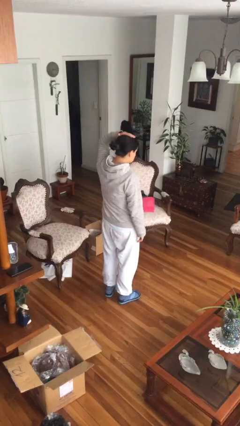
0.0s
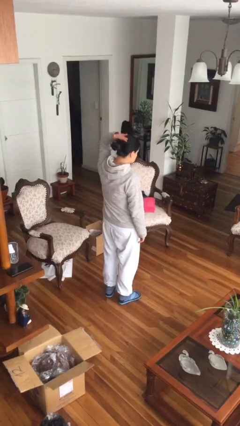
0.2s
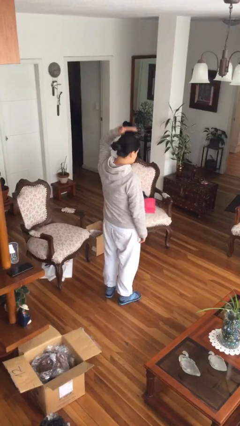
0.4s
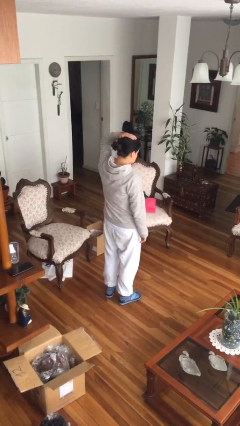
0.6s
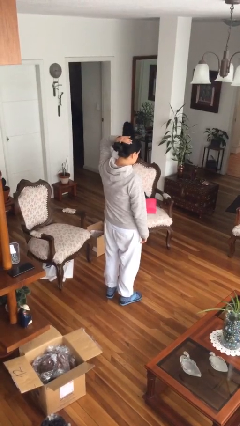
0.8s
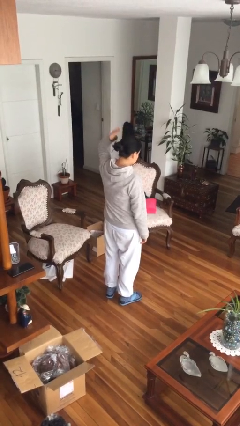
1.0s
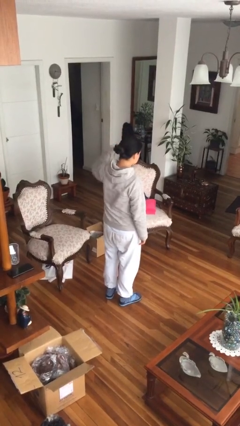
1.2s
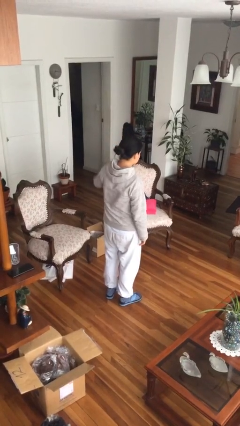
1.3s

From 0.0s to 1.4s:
person pats head

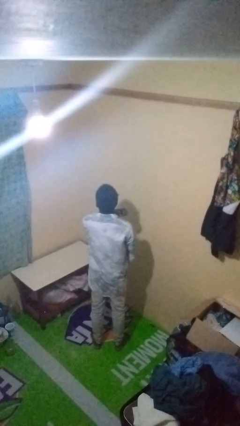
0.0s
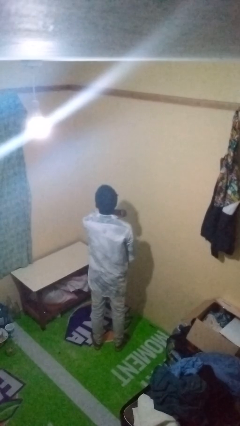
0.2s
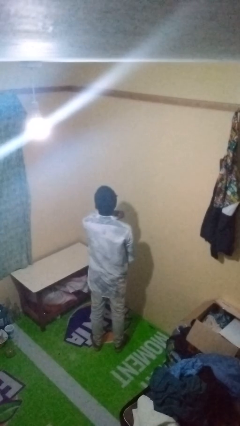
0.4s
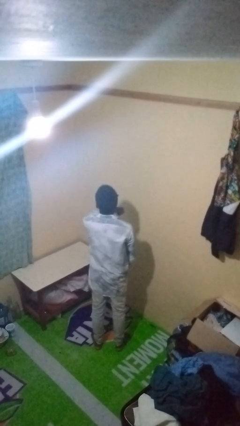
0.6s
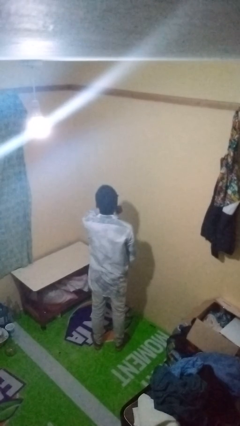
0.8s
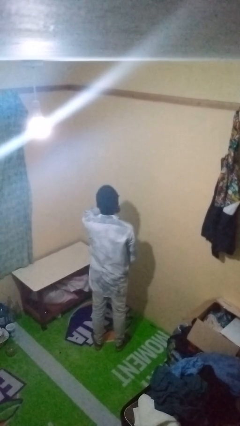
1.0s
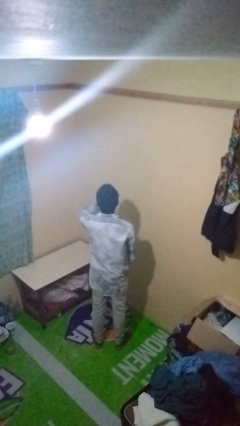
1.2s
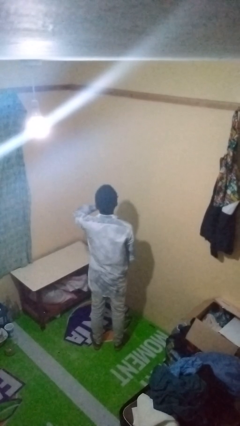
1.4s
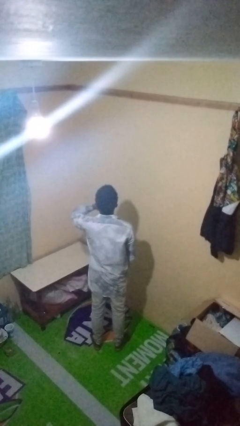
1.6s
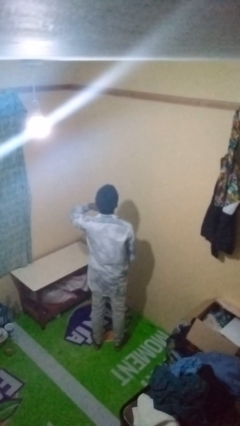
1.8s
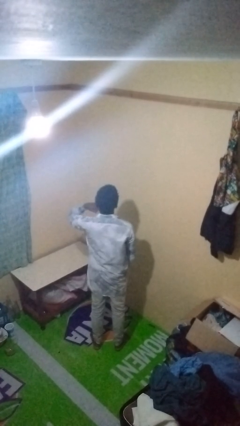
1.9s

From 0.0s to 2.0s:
person gestures cut

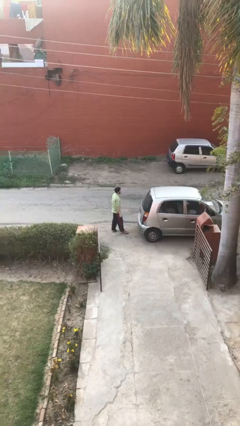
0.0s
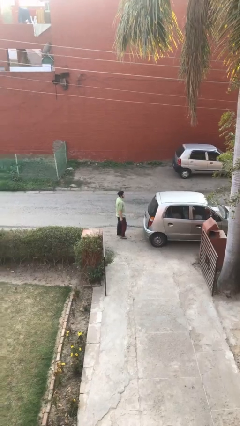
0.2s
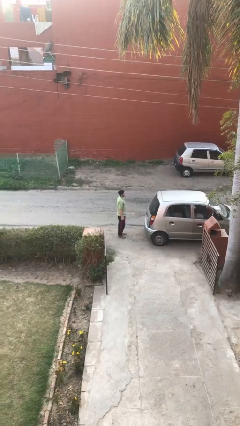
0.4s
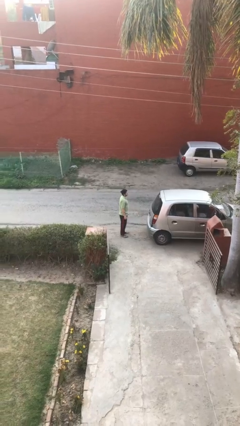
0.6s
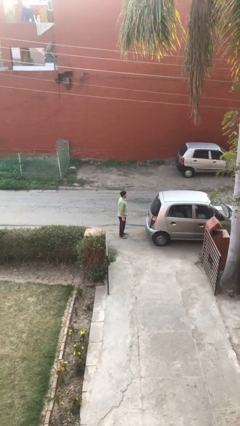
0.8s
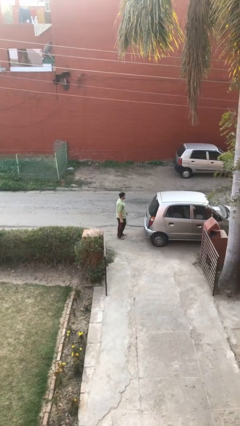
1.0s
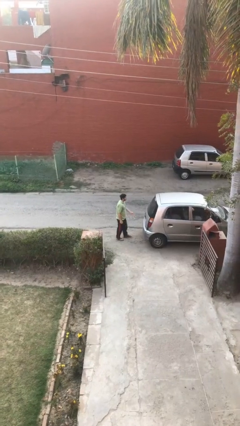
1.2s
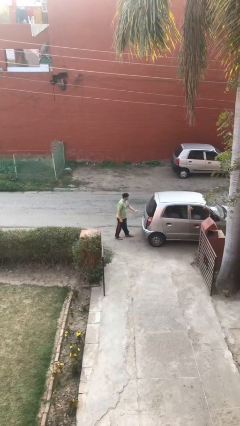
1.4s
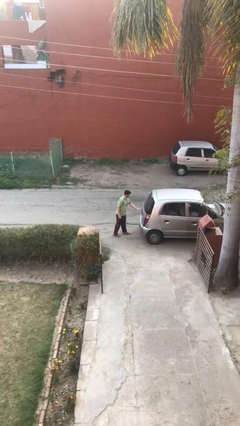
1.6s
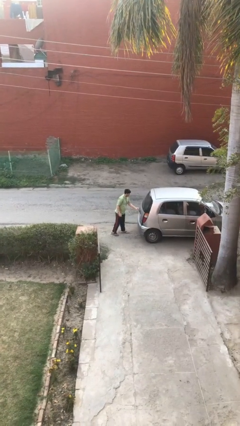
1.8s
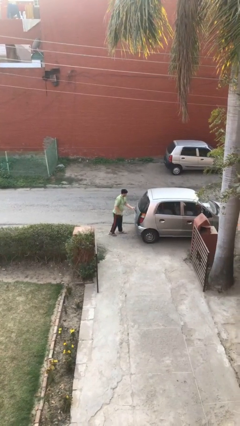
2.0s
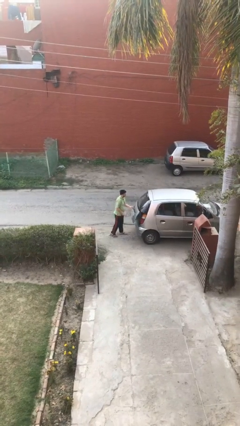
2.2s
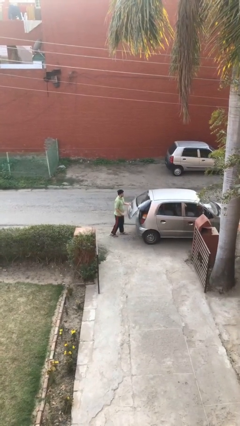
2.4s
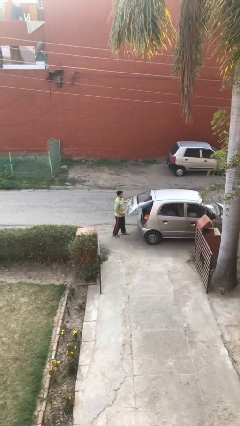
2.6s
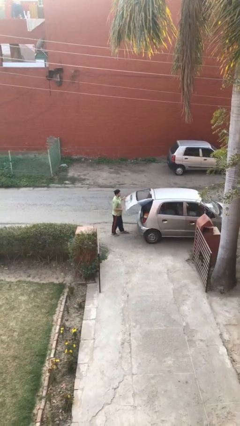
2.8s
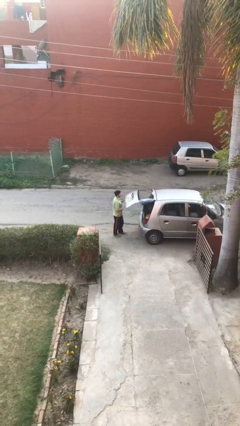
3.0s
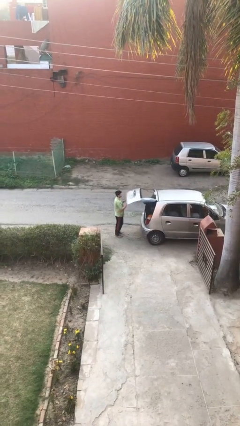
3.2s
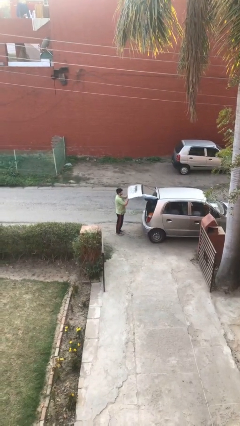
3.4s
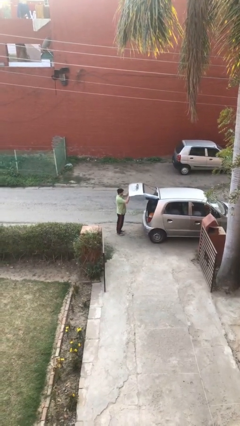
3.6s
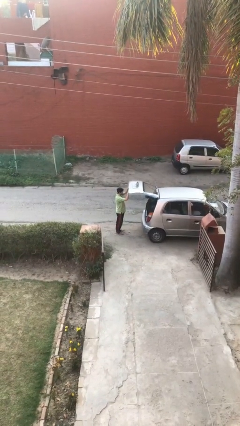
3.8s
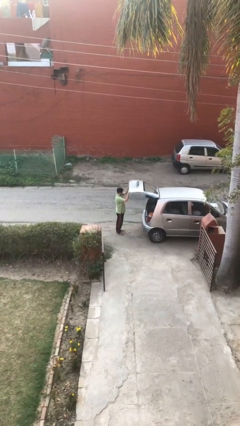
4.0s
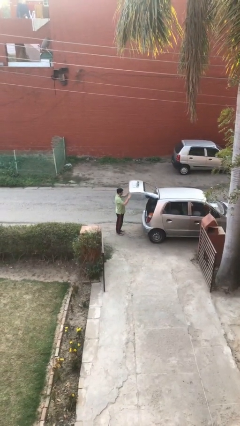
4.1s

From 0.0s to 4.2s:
person opens car trunk

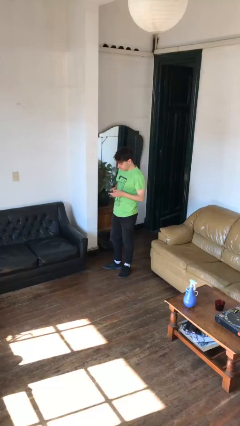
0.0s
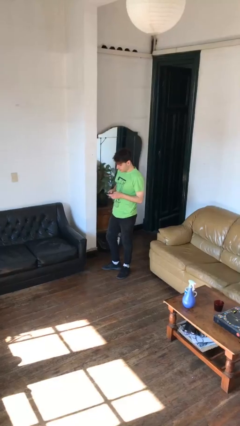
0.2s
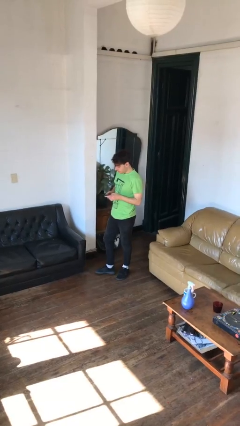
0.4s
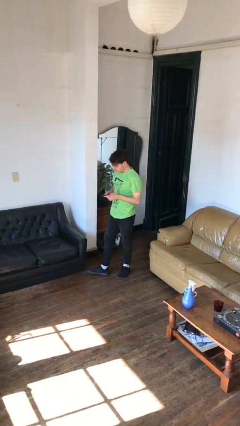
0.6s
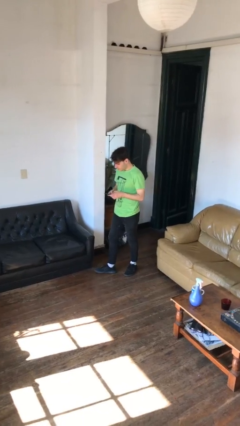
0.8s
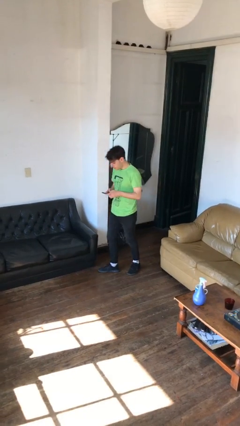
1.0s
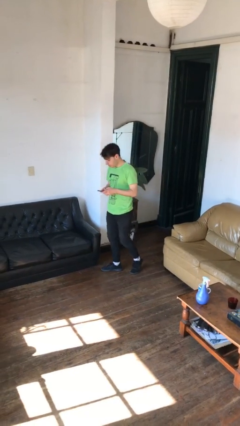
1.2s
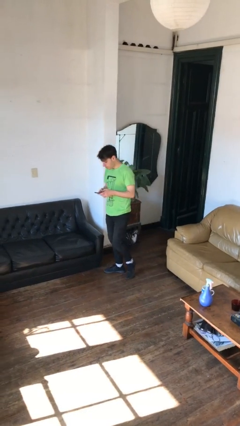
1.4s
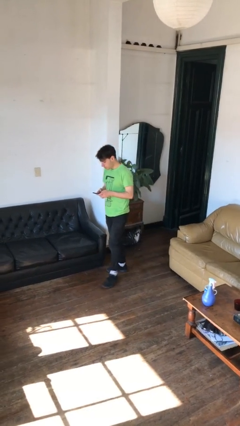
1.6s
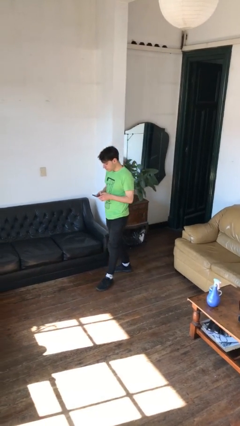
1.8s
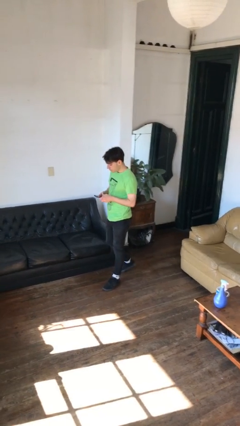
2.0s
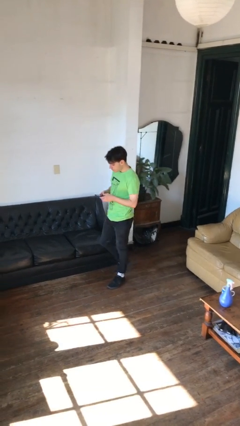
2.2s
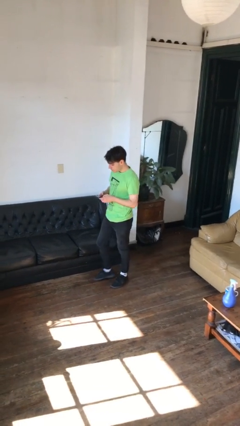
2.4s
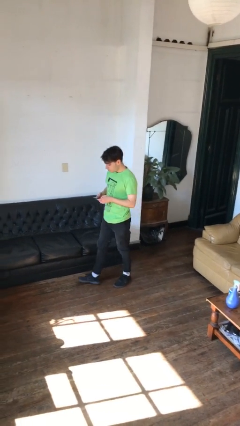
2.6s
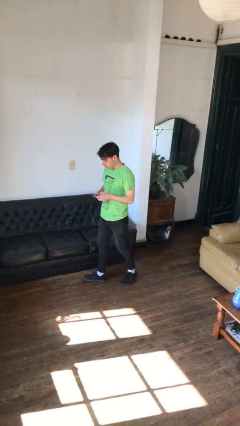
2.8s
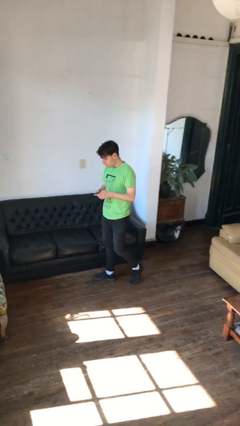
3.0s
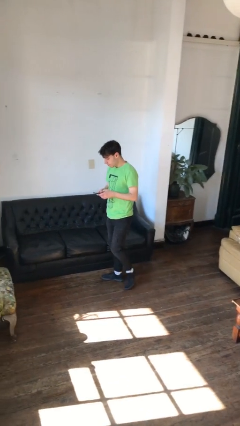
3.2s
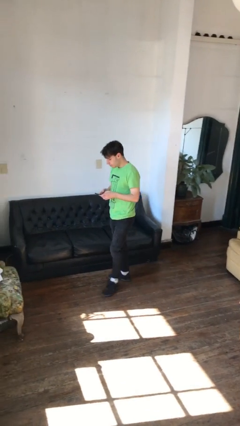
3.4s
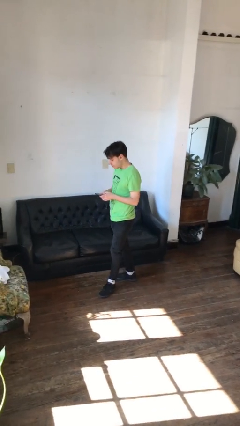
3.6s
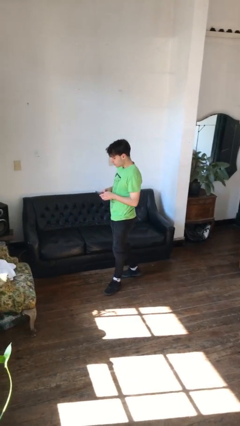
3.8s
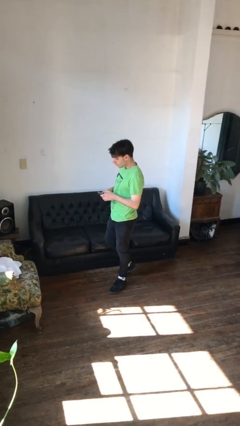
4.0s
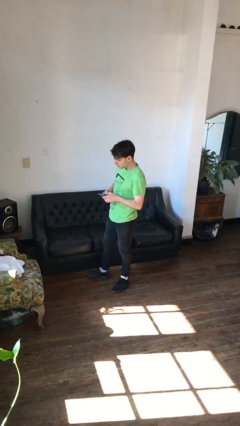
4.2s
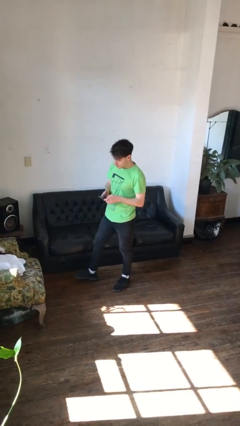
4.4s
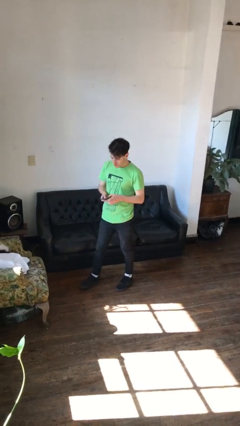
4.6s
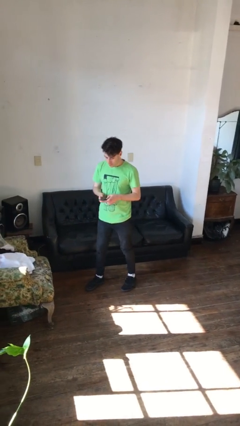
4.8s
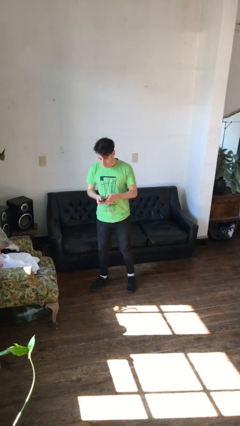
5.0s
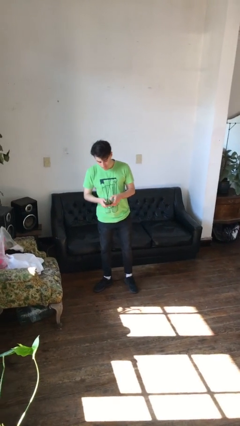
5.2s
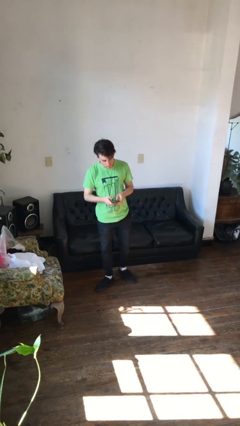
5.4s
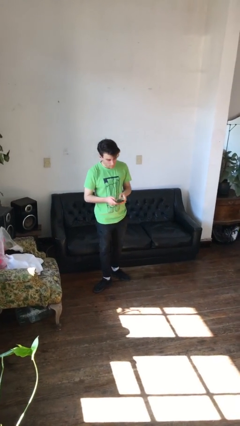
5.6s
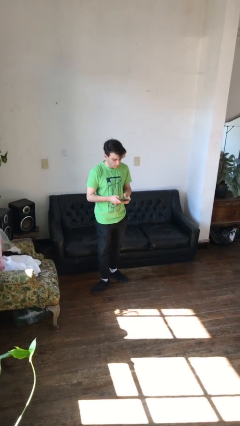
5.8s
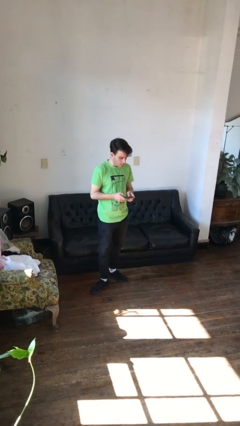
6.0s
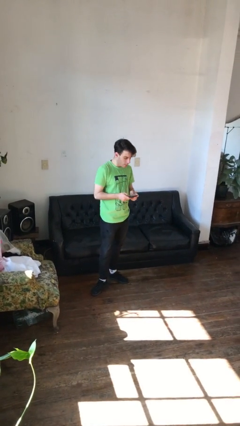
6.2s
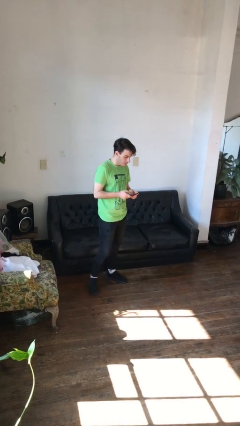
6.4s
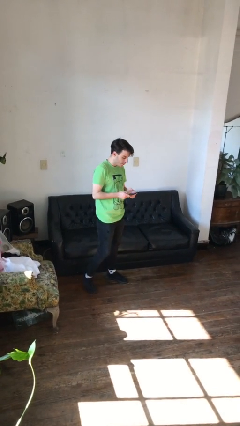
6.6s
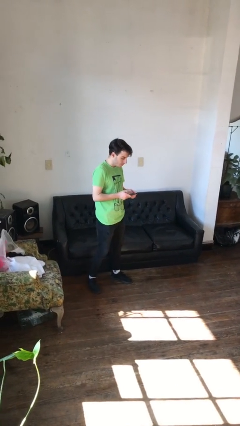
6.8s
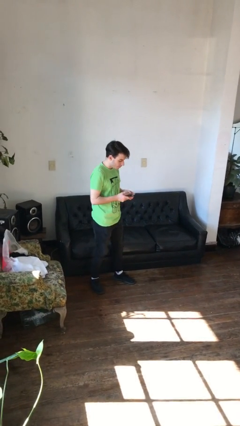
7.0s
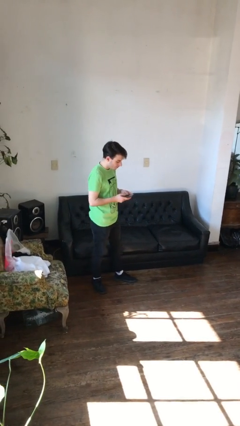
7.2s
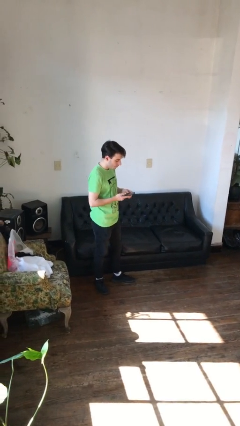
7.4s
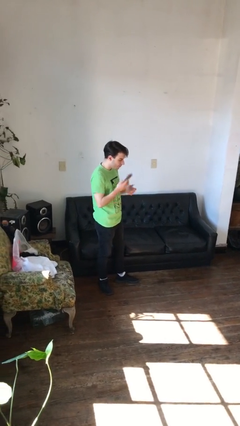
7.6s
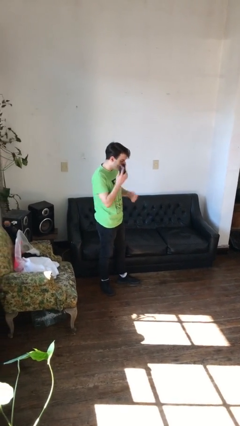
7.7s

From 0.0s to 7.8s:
person texts on phone

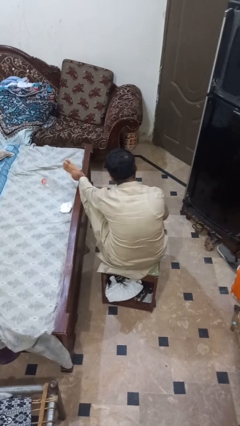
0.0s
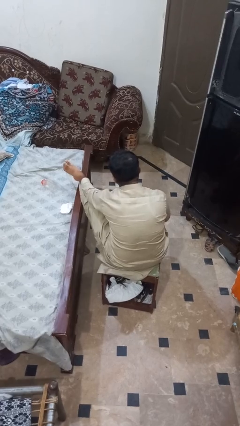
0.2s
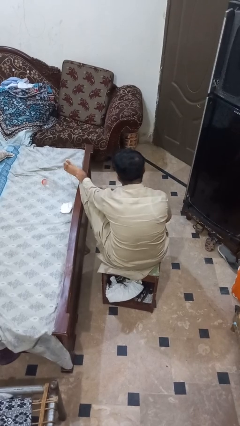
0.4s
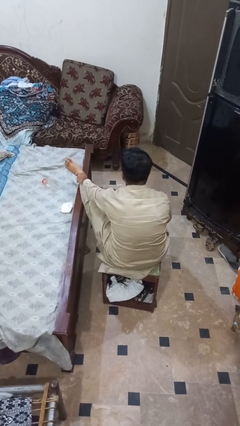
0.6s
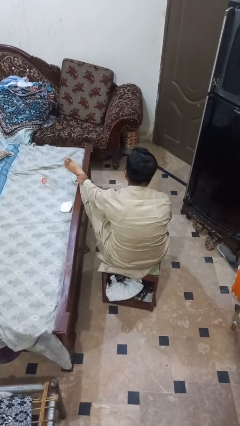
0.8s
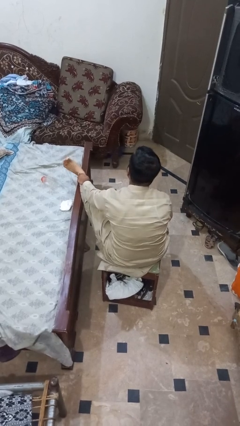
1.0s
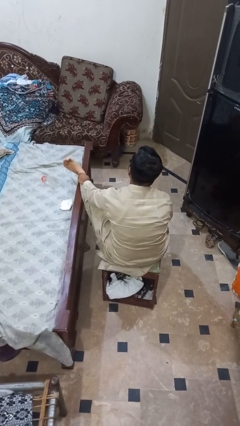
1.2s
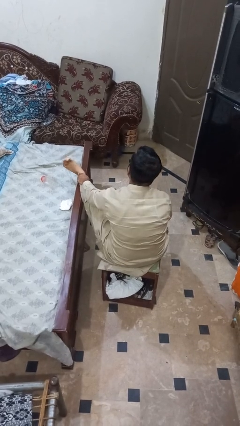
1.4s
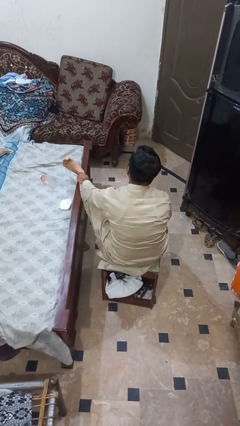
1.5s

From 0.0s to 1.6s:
person rubs foot

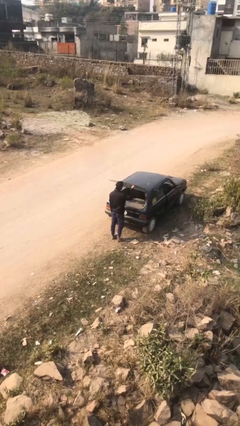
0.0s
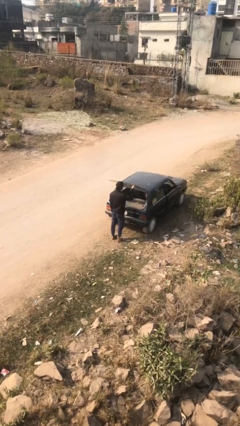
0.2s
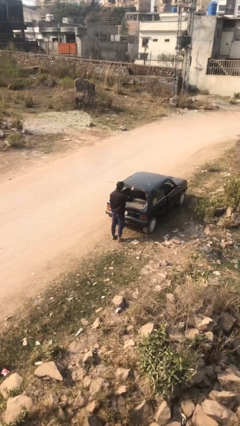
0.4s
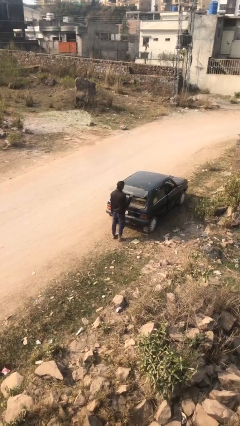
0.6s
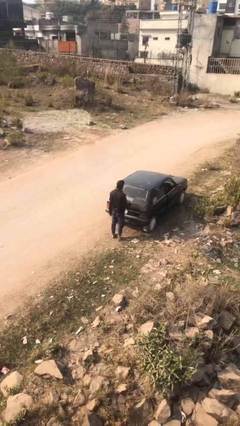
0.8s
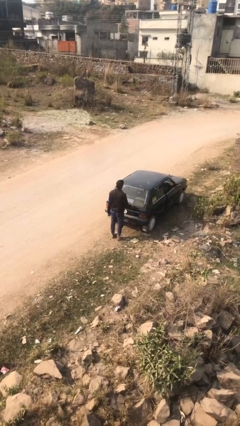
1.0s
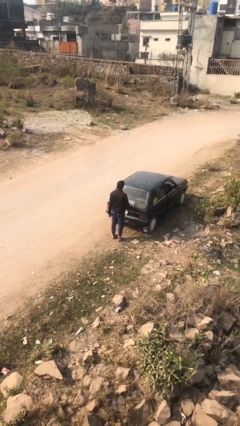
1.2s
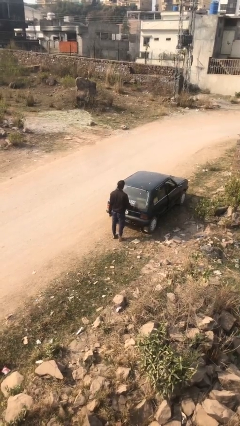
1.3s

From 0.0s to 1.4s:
person closes car trunk
